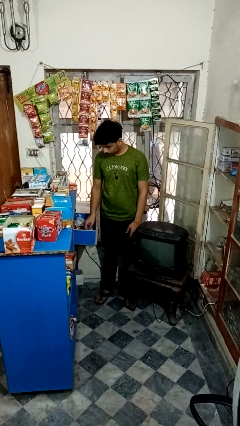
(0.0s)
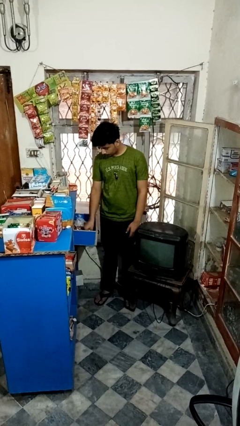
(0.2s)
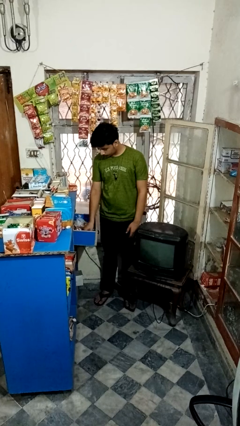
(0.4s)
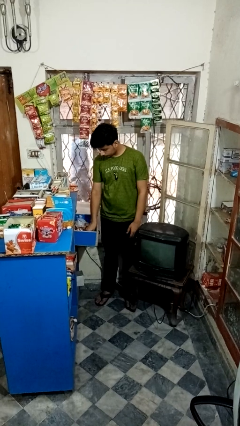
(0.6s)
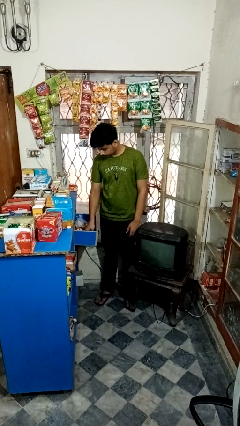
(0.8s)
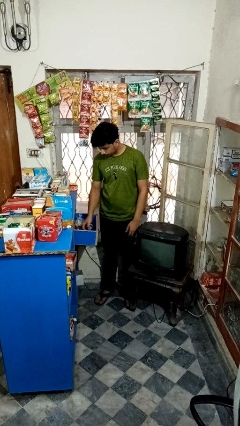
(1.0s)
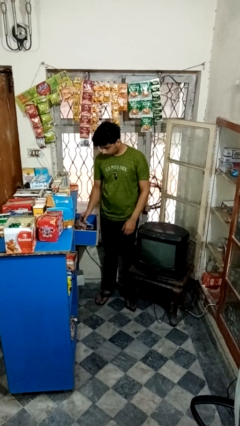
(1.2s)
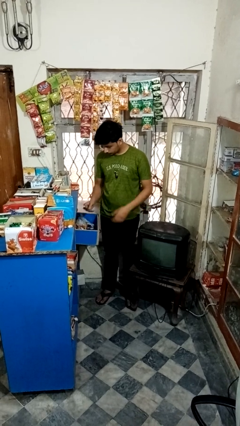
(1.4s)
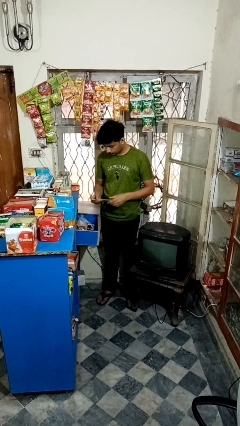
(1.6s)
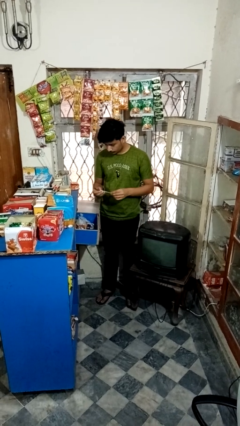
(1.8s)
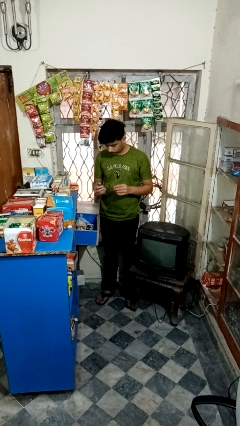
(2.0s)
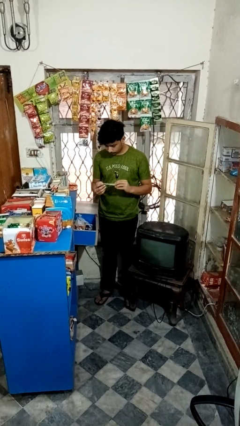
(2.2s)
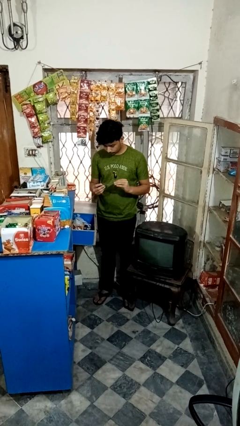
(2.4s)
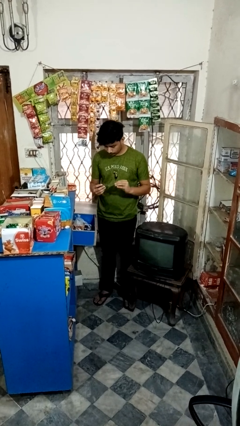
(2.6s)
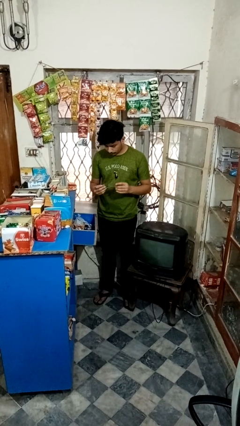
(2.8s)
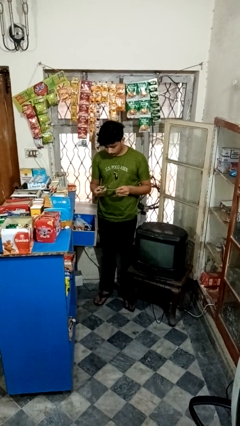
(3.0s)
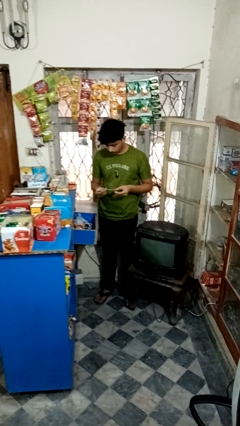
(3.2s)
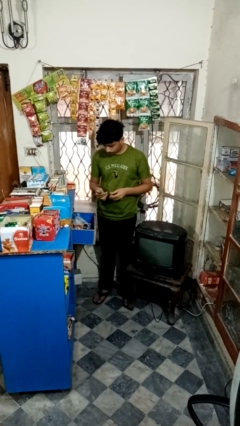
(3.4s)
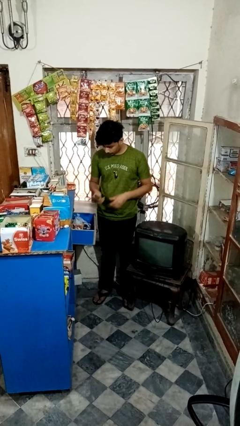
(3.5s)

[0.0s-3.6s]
person takes object from kitchen drawer

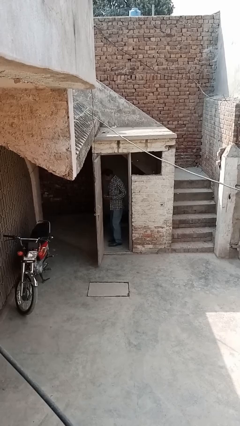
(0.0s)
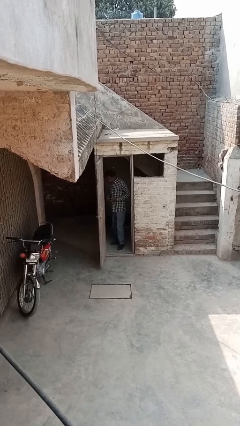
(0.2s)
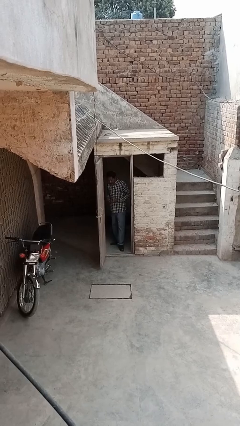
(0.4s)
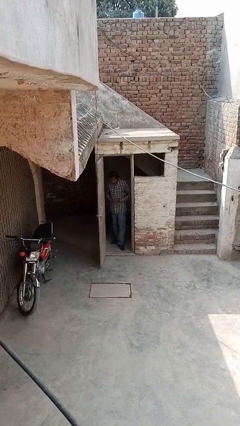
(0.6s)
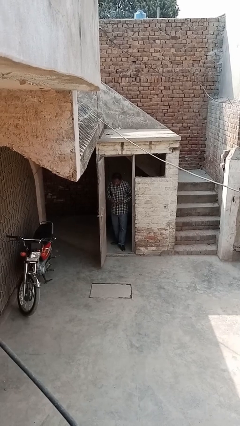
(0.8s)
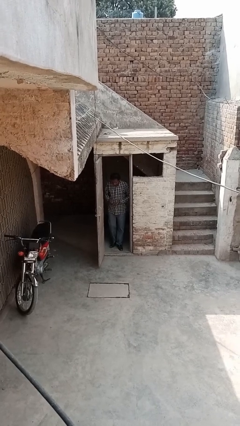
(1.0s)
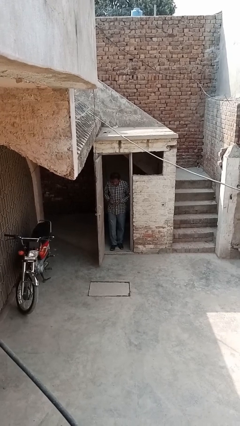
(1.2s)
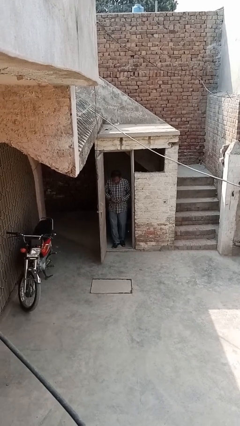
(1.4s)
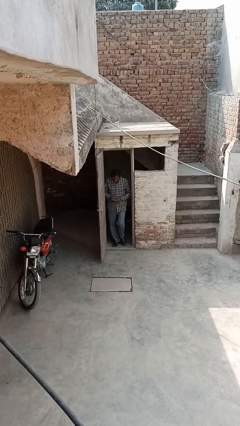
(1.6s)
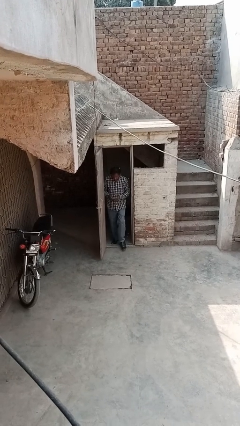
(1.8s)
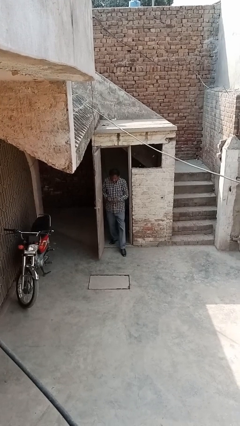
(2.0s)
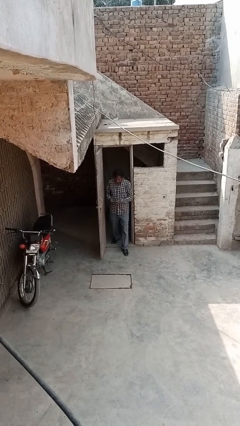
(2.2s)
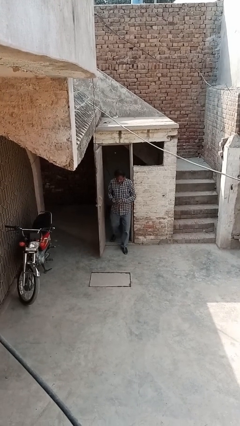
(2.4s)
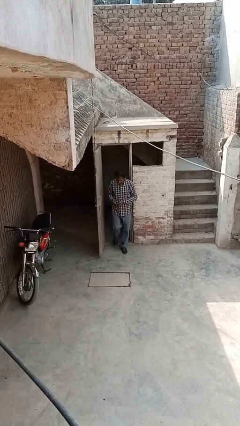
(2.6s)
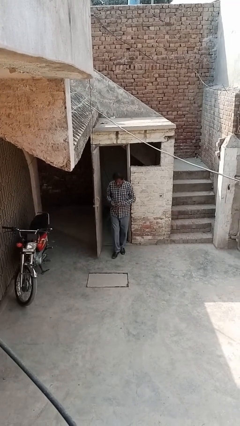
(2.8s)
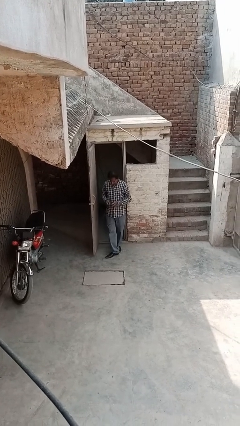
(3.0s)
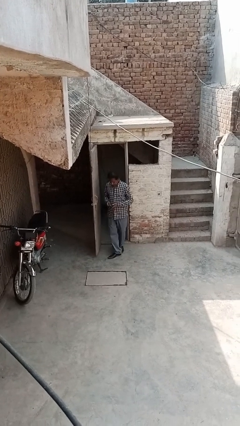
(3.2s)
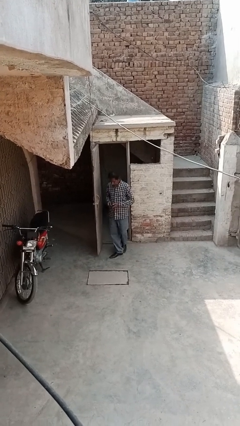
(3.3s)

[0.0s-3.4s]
person enters scene through structure

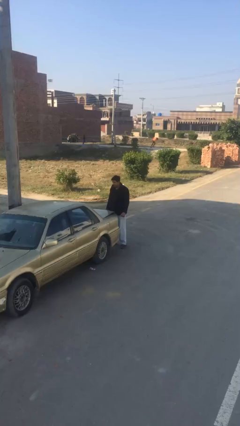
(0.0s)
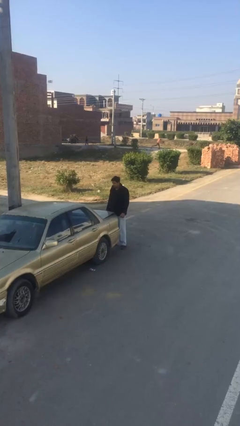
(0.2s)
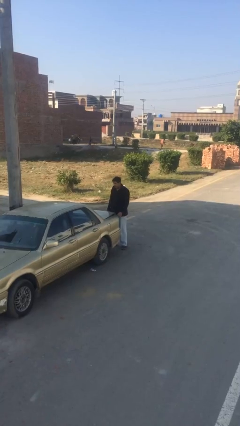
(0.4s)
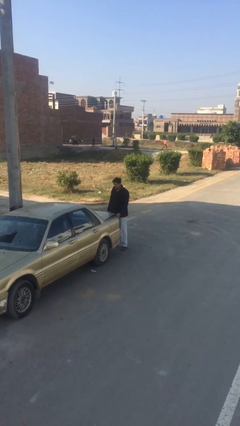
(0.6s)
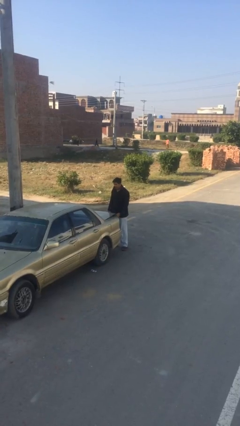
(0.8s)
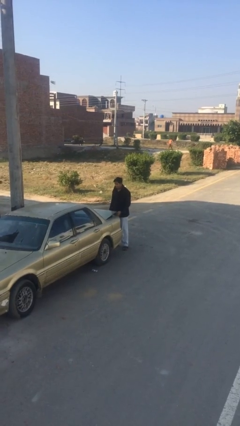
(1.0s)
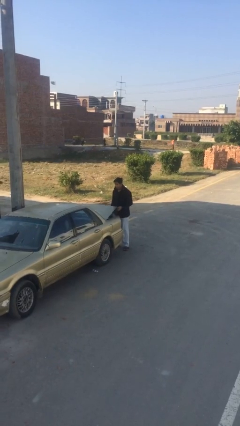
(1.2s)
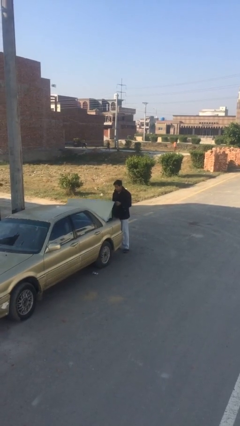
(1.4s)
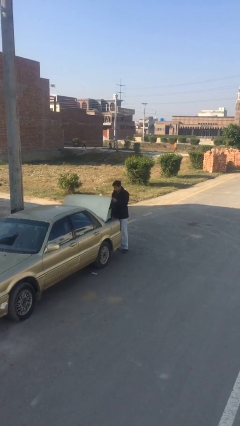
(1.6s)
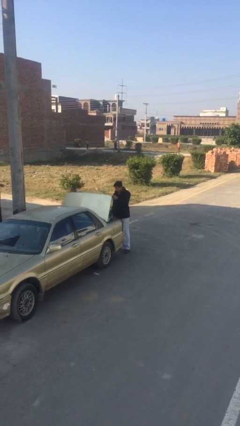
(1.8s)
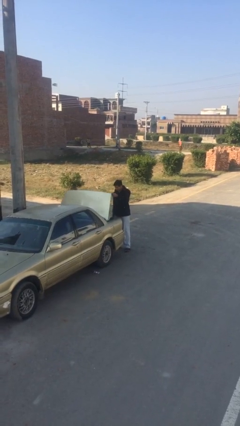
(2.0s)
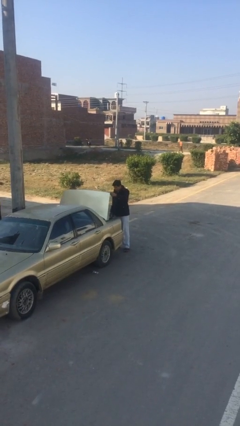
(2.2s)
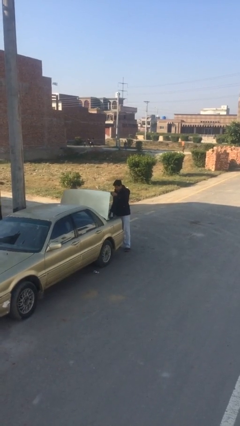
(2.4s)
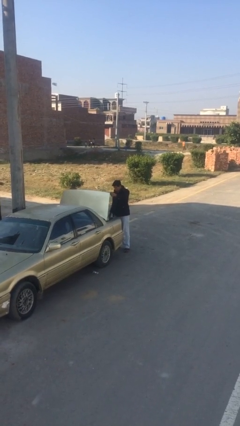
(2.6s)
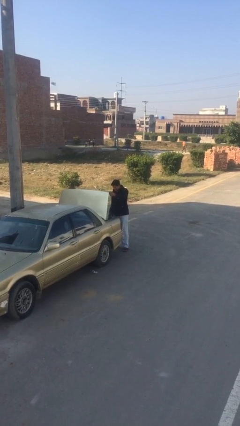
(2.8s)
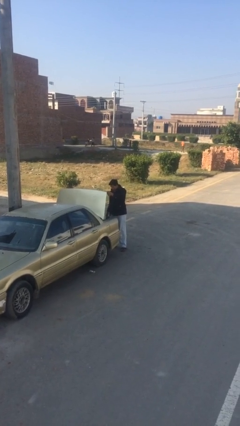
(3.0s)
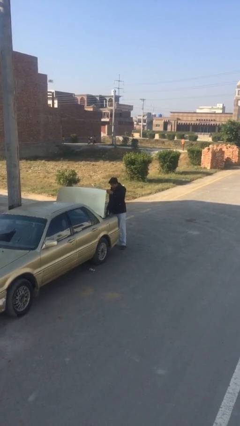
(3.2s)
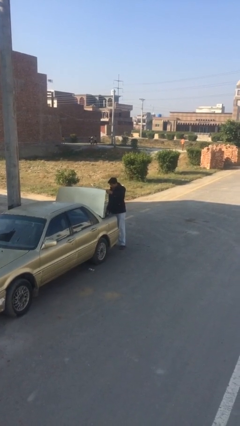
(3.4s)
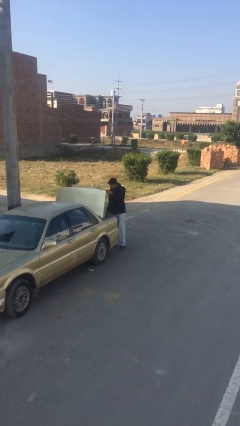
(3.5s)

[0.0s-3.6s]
person opens car trunk

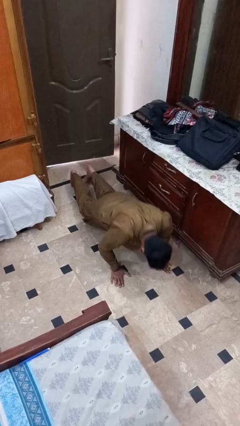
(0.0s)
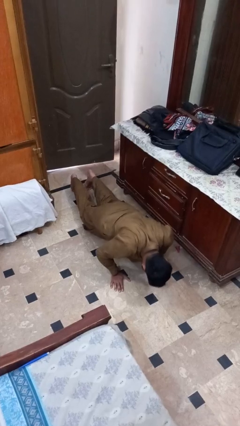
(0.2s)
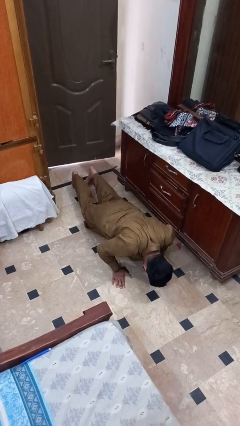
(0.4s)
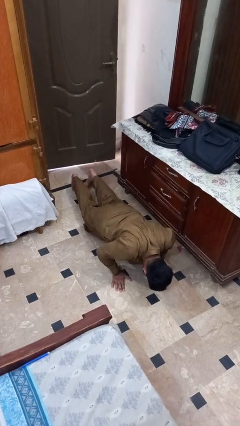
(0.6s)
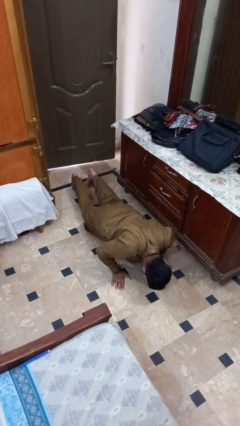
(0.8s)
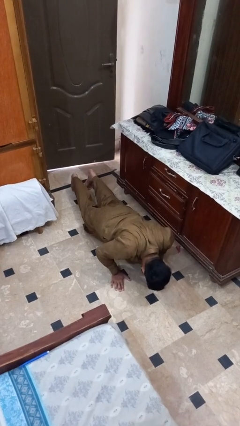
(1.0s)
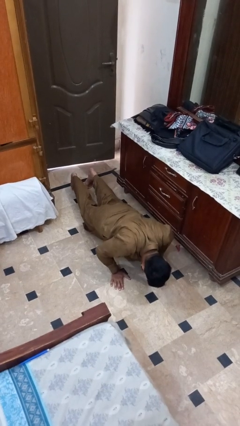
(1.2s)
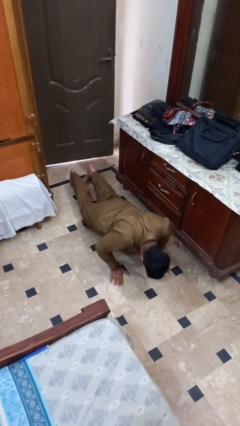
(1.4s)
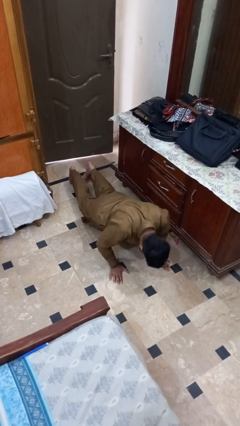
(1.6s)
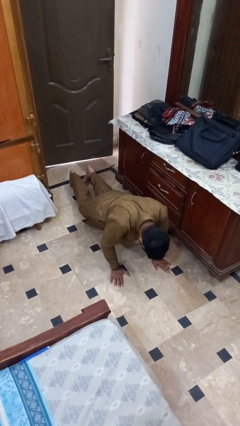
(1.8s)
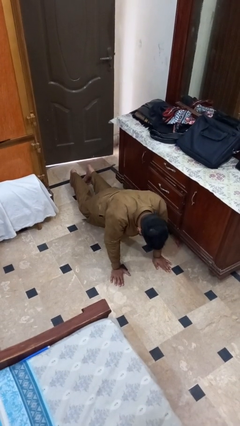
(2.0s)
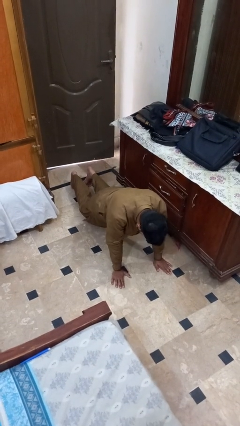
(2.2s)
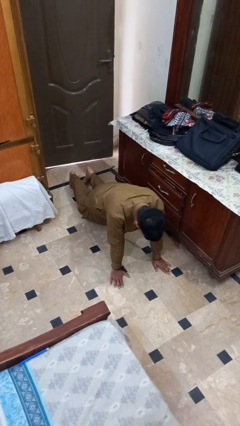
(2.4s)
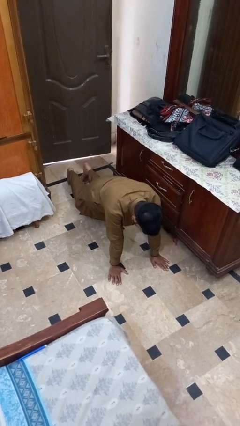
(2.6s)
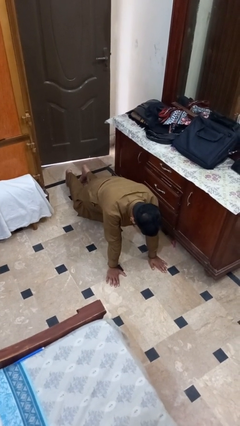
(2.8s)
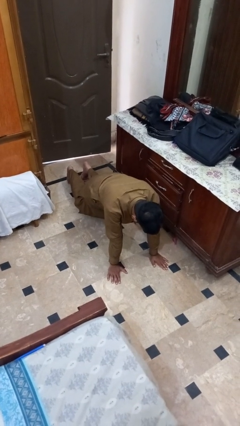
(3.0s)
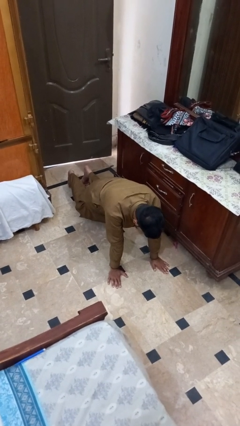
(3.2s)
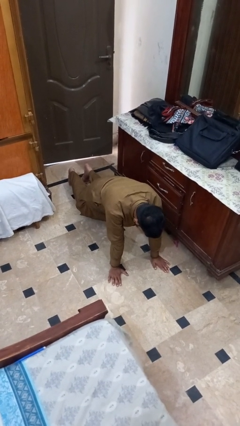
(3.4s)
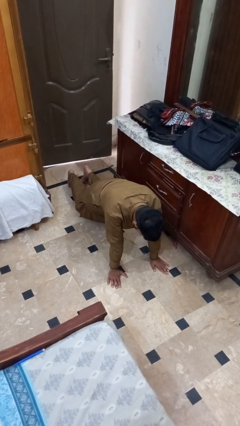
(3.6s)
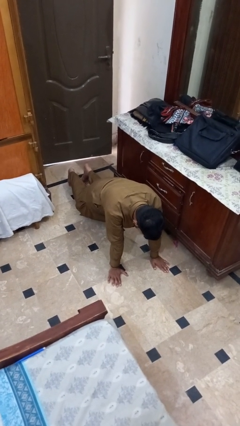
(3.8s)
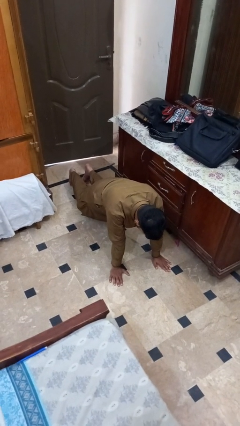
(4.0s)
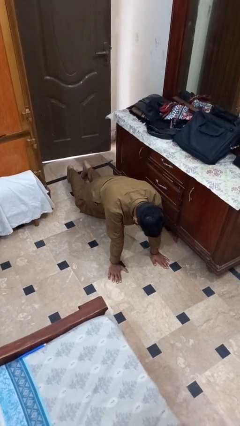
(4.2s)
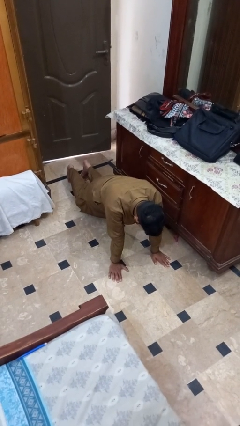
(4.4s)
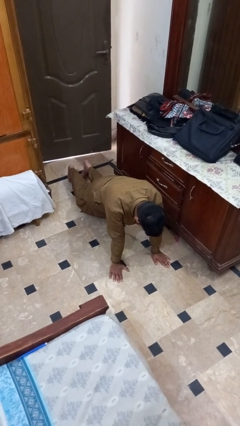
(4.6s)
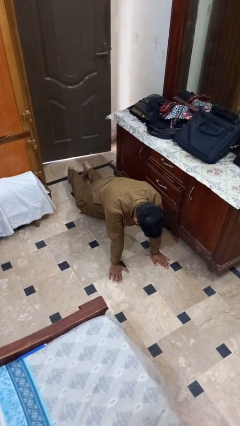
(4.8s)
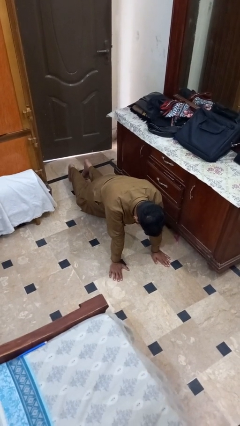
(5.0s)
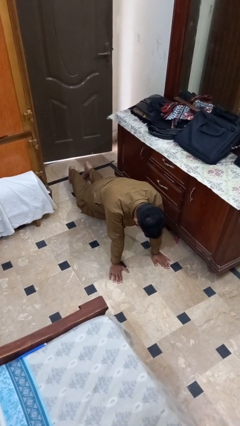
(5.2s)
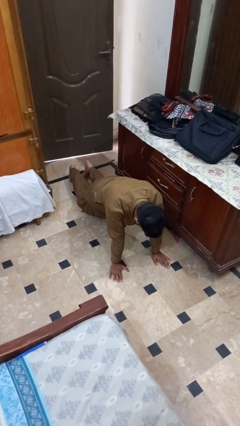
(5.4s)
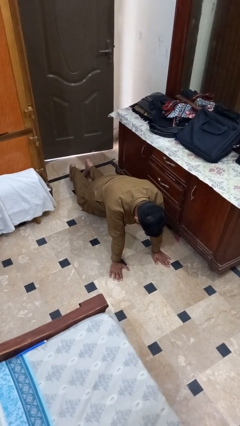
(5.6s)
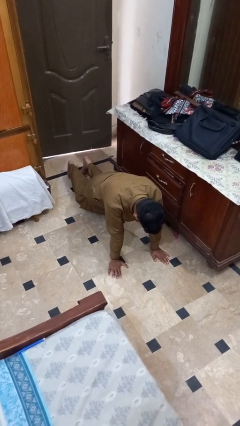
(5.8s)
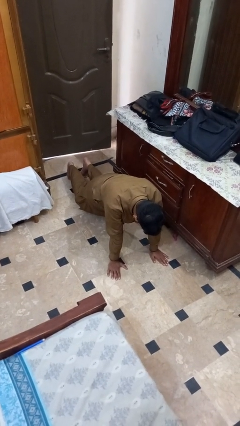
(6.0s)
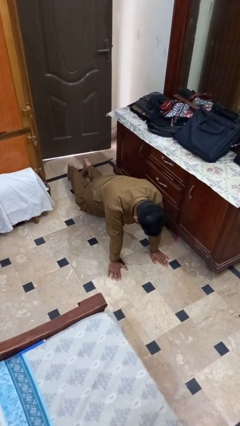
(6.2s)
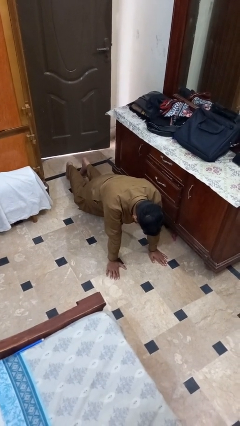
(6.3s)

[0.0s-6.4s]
person exercises with pushup

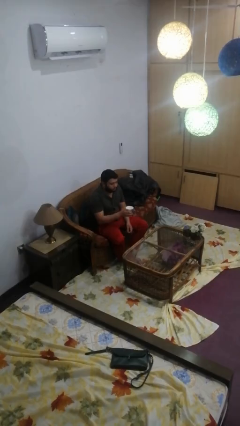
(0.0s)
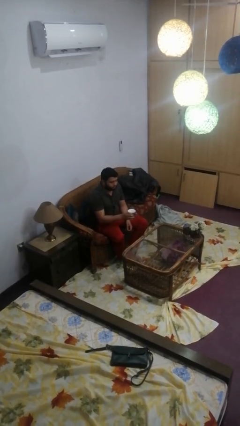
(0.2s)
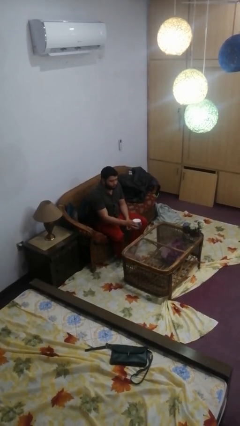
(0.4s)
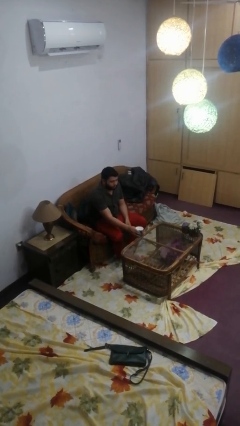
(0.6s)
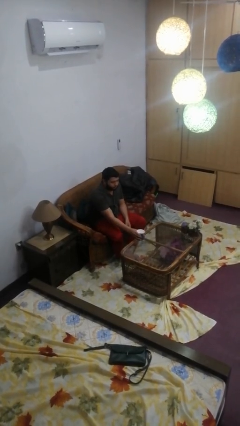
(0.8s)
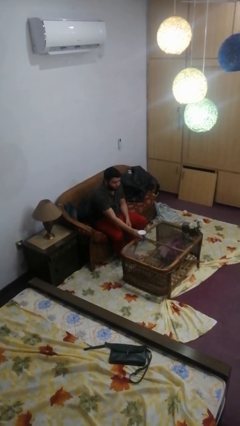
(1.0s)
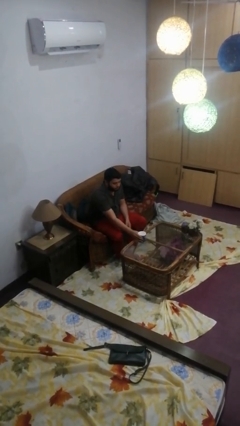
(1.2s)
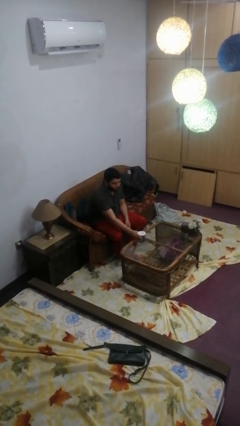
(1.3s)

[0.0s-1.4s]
person puts down object on table
